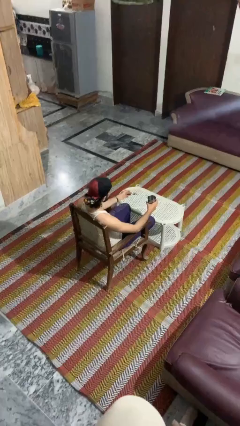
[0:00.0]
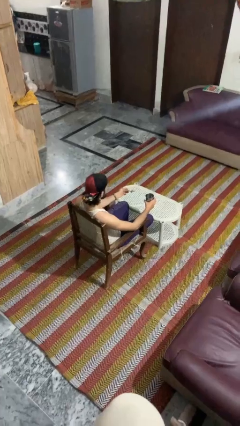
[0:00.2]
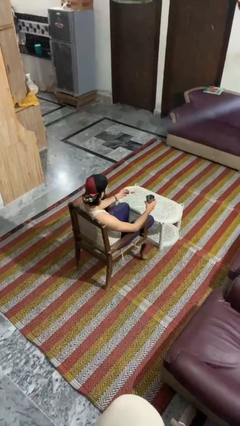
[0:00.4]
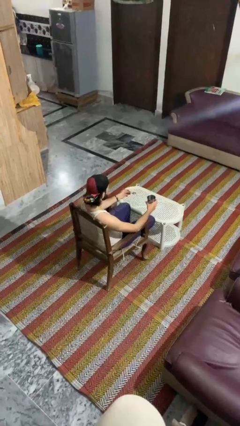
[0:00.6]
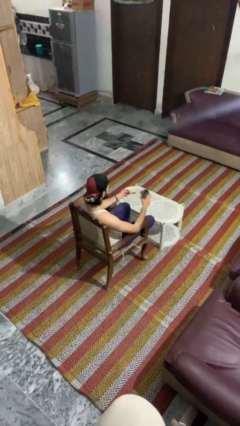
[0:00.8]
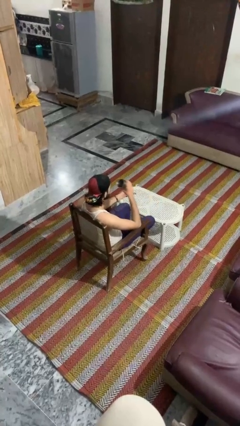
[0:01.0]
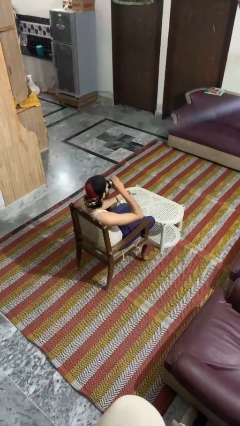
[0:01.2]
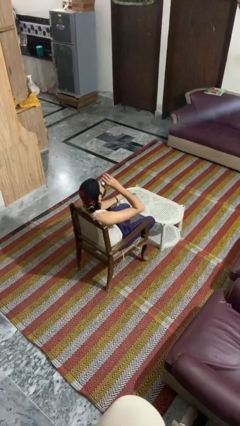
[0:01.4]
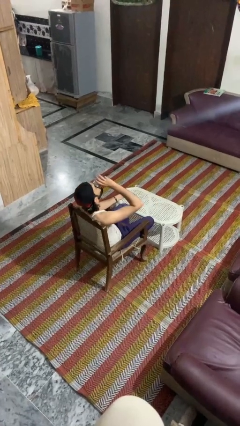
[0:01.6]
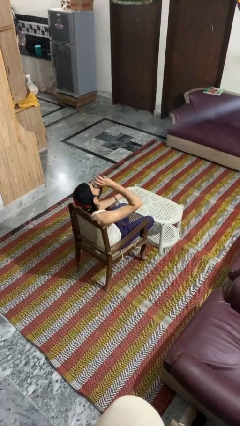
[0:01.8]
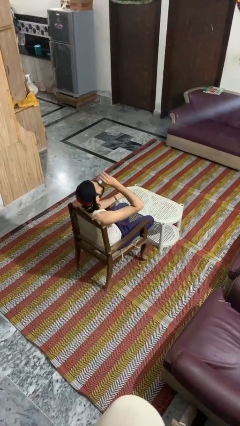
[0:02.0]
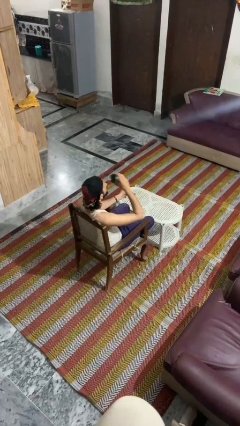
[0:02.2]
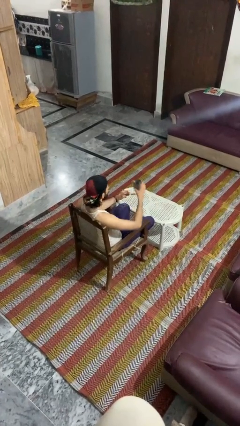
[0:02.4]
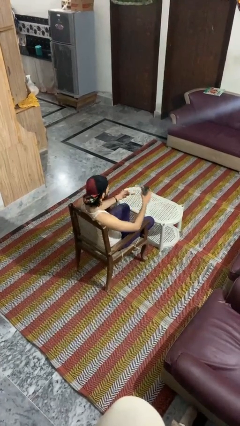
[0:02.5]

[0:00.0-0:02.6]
person drinks from mug

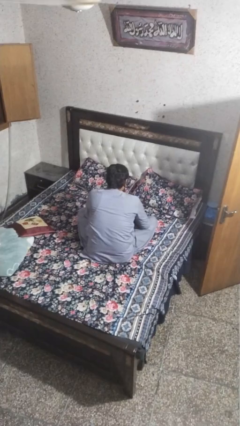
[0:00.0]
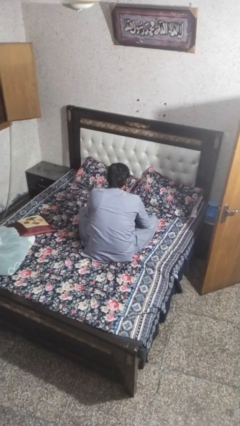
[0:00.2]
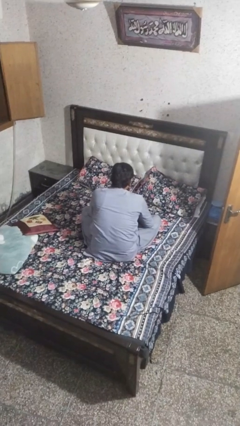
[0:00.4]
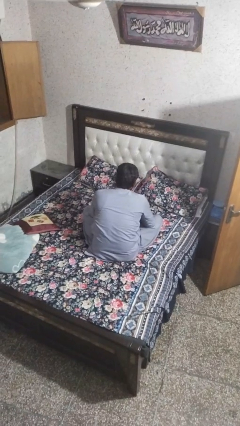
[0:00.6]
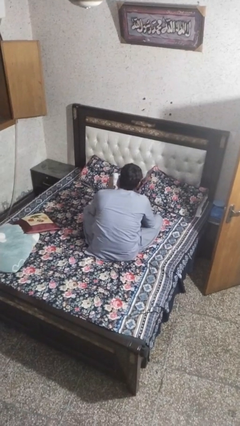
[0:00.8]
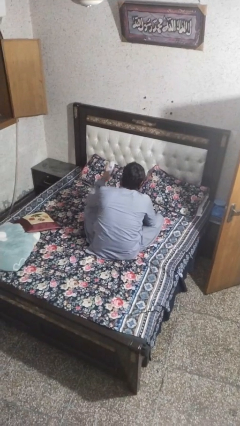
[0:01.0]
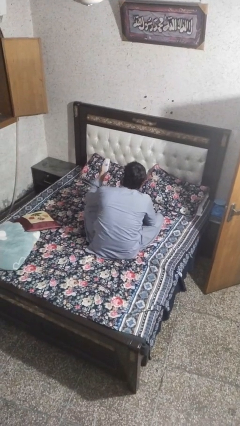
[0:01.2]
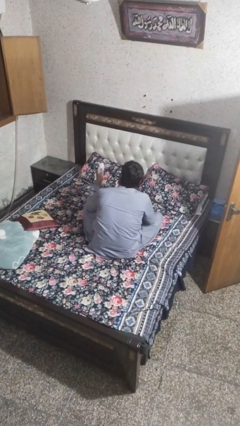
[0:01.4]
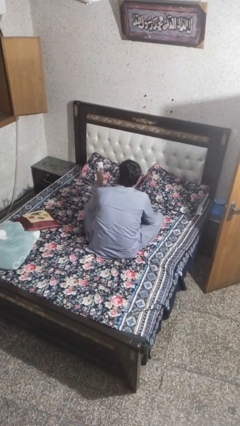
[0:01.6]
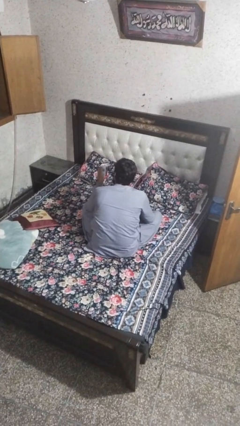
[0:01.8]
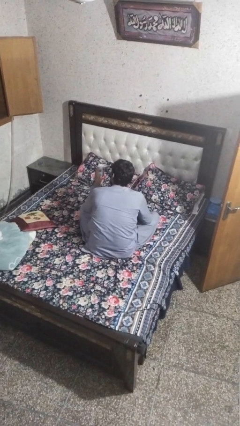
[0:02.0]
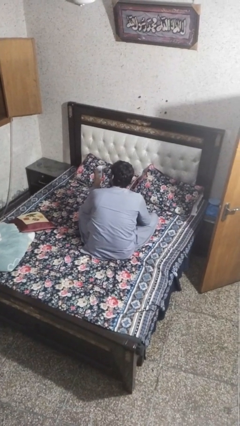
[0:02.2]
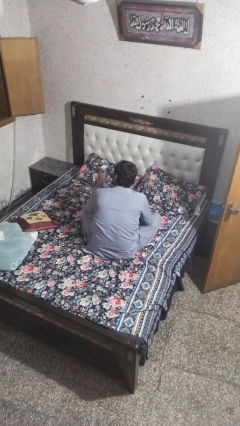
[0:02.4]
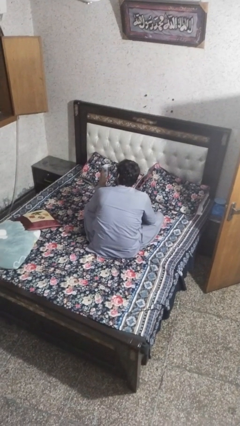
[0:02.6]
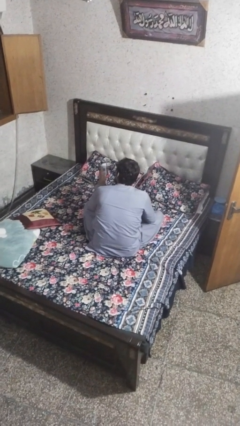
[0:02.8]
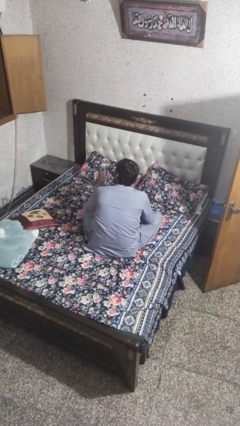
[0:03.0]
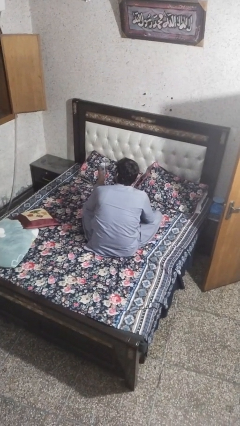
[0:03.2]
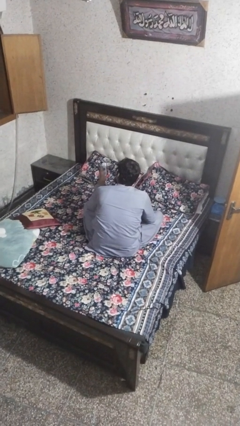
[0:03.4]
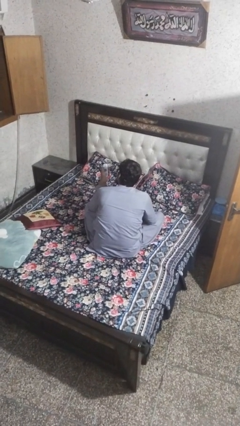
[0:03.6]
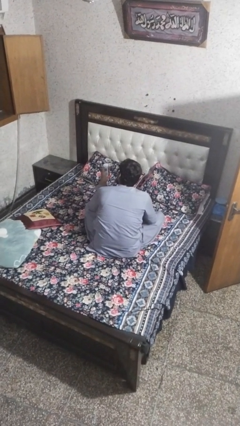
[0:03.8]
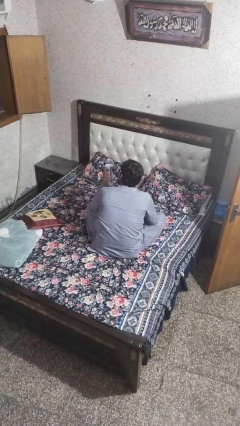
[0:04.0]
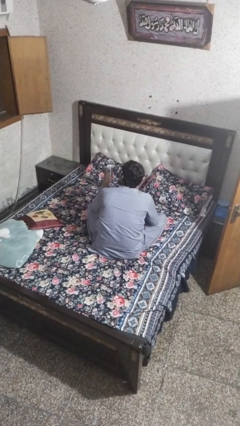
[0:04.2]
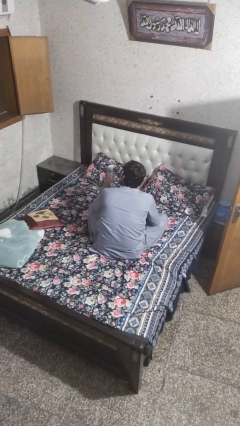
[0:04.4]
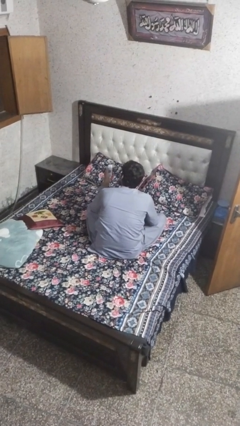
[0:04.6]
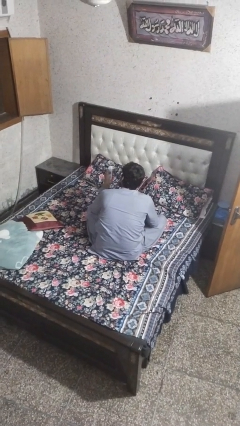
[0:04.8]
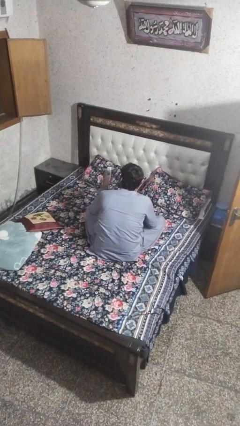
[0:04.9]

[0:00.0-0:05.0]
person uses television remote

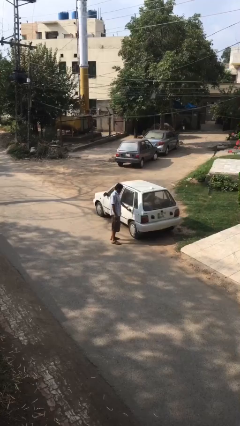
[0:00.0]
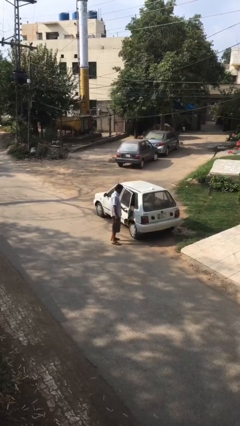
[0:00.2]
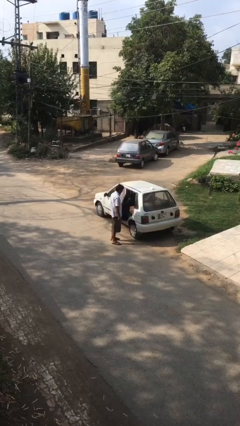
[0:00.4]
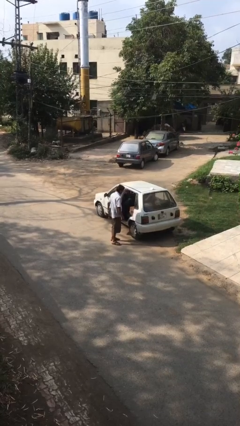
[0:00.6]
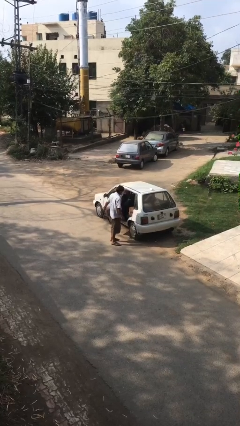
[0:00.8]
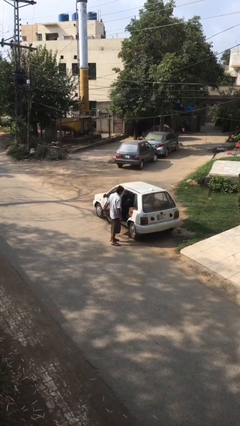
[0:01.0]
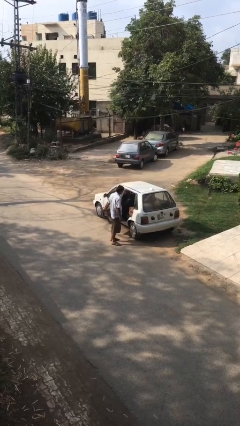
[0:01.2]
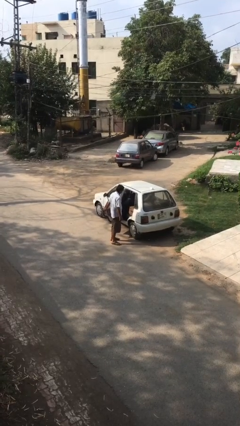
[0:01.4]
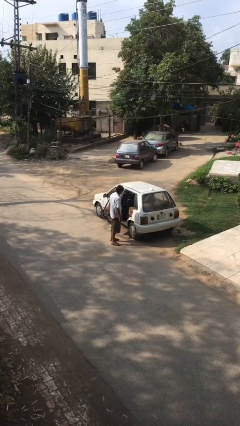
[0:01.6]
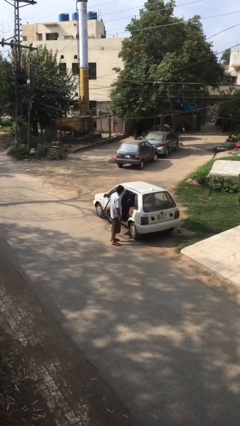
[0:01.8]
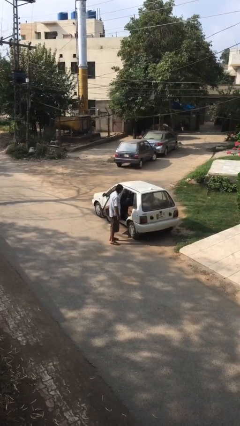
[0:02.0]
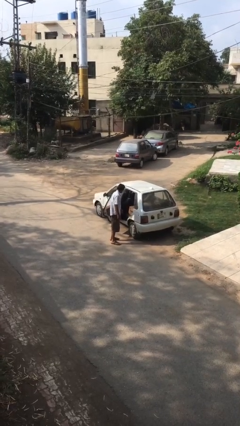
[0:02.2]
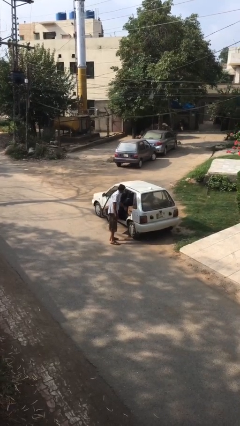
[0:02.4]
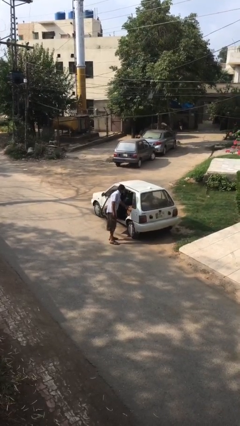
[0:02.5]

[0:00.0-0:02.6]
person opens car door

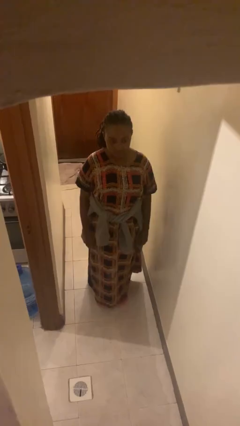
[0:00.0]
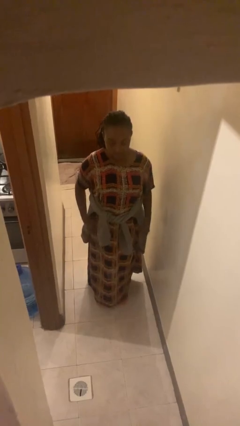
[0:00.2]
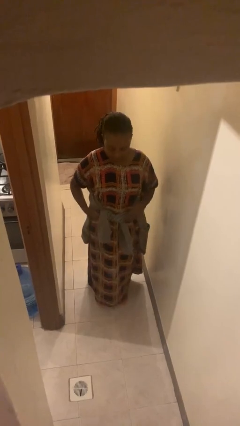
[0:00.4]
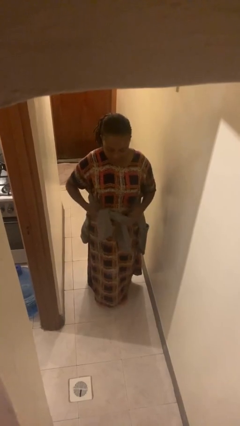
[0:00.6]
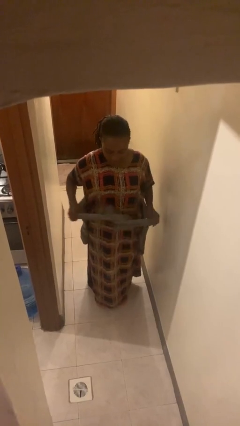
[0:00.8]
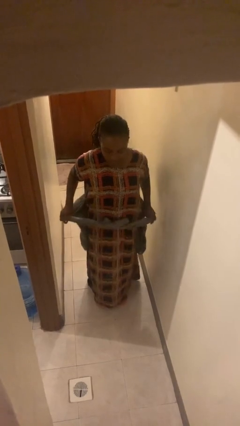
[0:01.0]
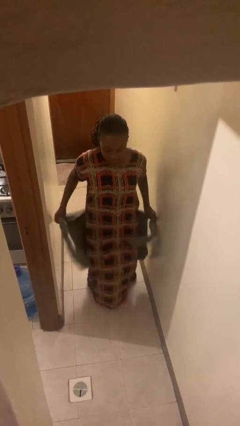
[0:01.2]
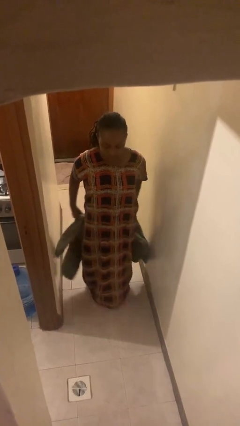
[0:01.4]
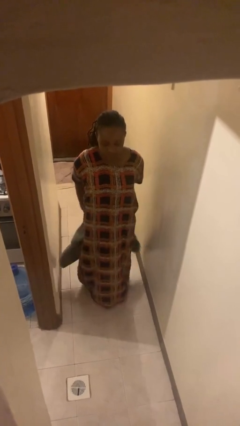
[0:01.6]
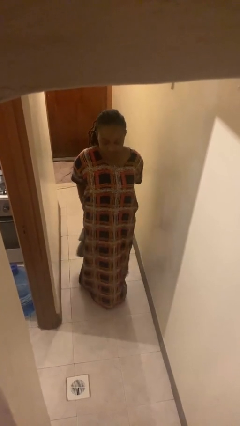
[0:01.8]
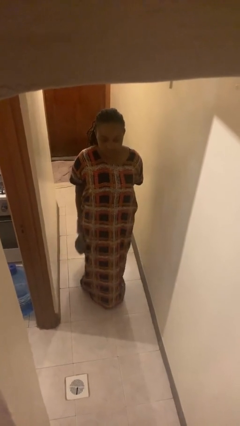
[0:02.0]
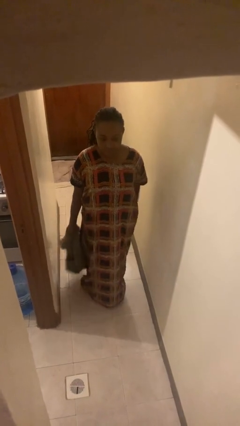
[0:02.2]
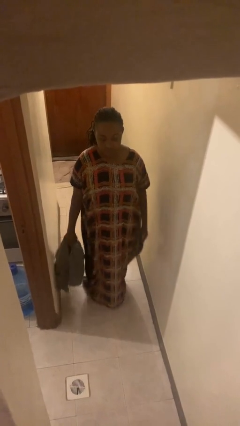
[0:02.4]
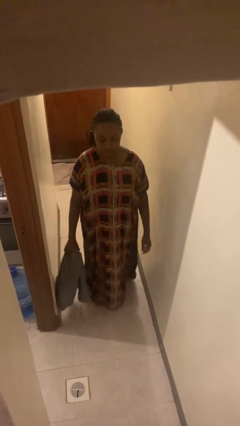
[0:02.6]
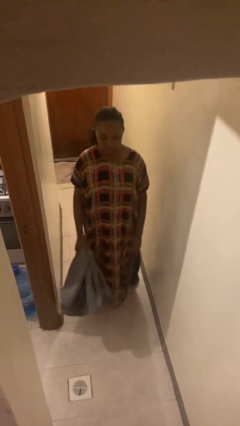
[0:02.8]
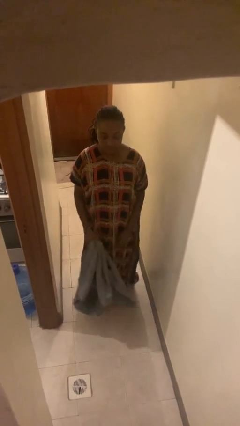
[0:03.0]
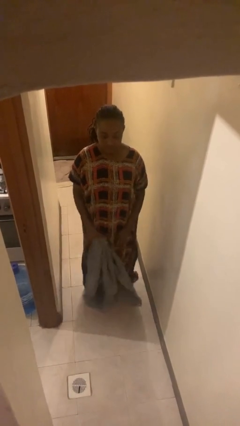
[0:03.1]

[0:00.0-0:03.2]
person unties jacket around waist

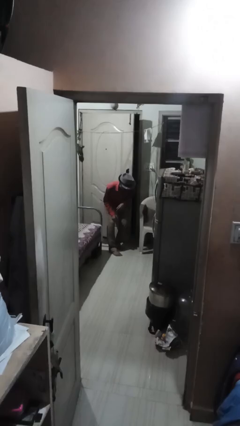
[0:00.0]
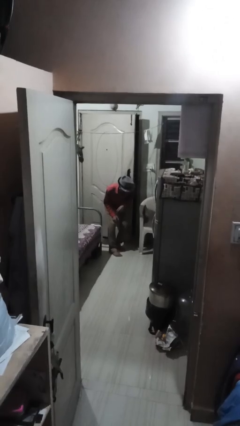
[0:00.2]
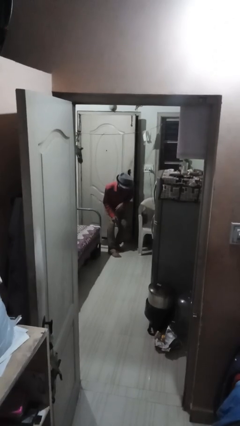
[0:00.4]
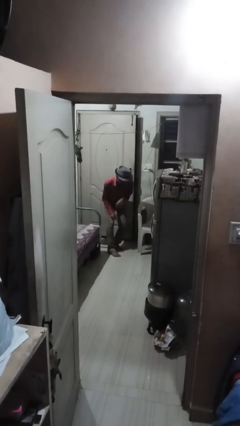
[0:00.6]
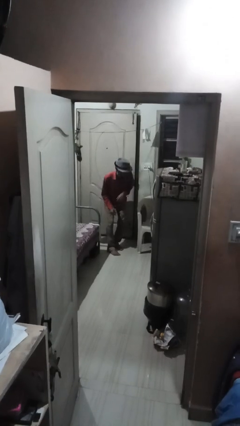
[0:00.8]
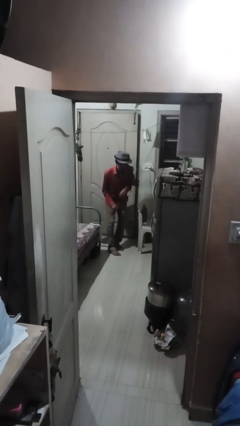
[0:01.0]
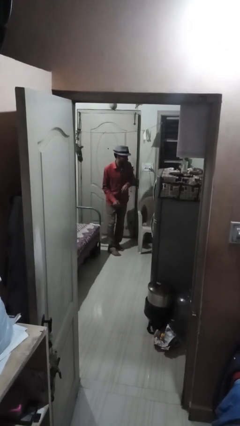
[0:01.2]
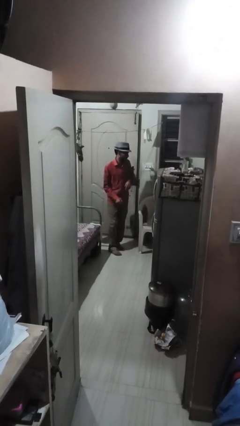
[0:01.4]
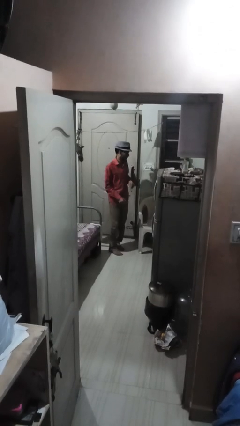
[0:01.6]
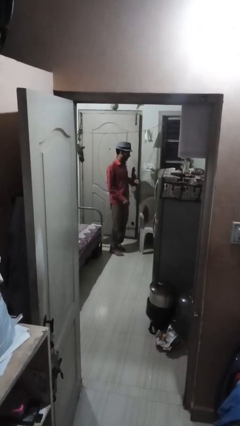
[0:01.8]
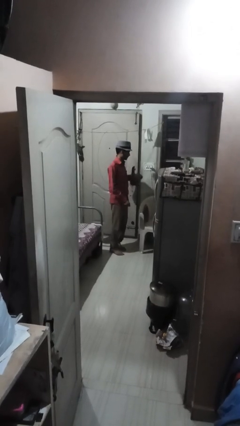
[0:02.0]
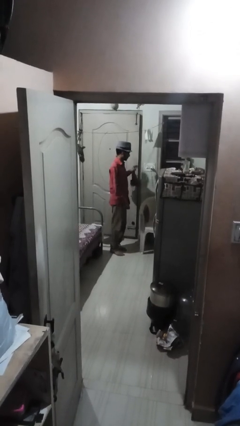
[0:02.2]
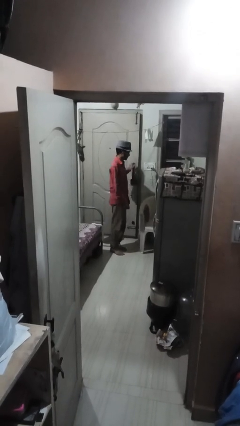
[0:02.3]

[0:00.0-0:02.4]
person closes door with hip

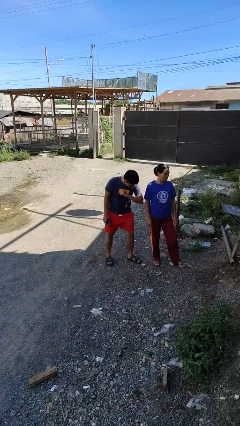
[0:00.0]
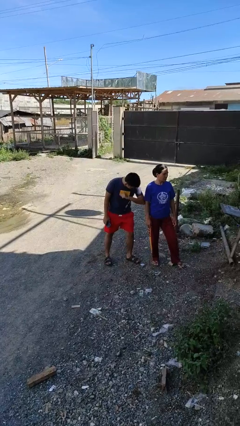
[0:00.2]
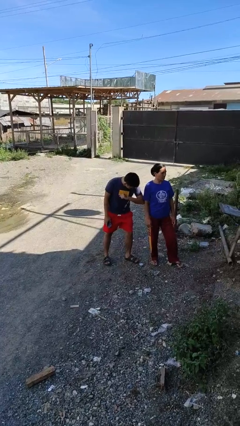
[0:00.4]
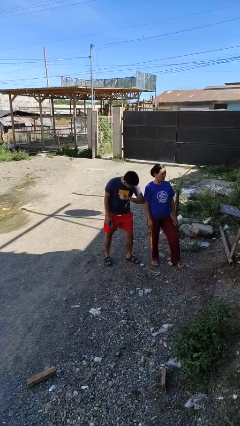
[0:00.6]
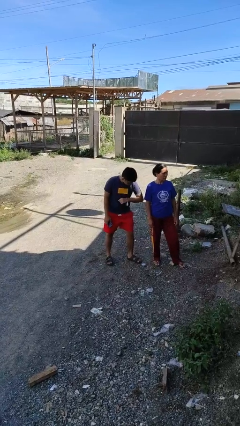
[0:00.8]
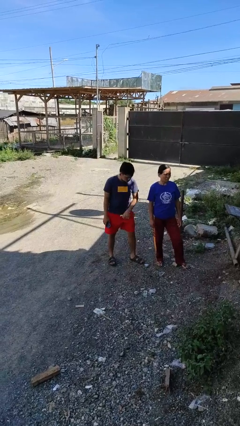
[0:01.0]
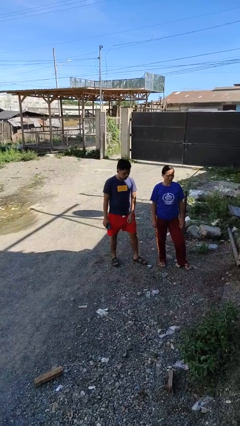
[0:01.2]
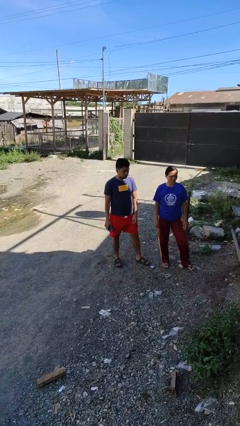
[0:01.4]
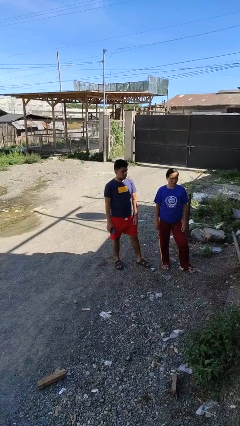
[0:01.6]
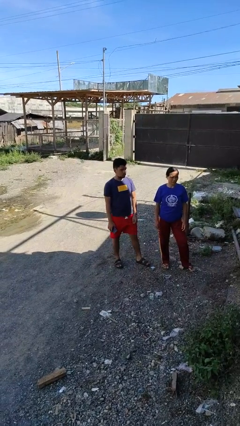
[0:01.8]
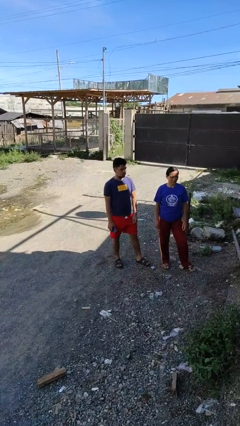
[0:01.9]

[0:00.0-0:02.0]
person nudges person with elbow
